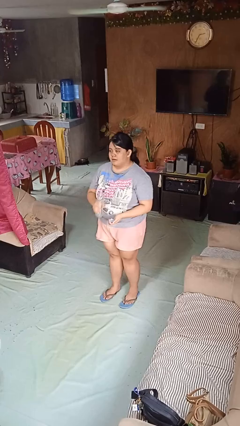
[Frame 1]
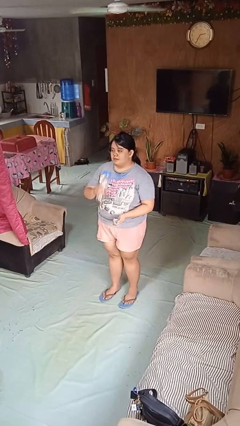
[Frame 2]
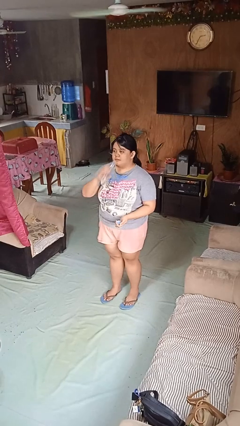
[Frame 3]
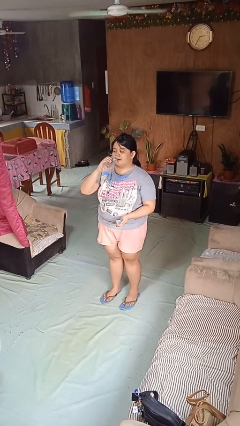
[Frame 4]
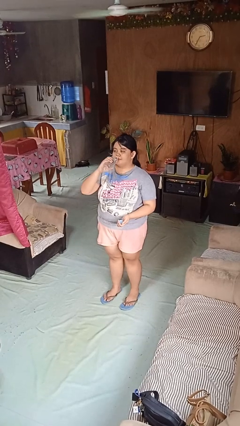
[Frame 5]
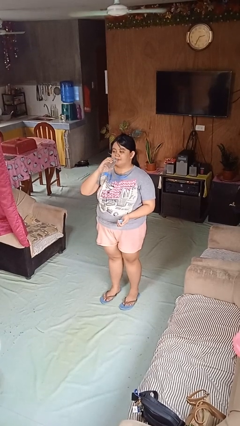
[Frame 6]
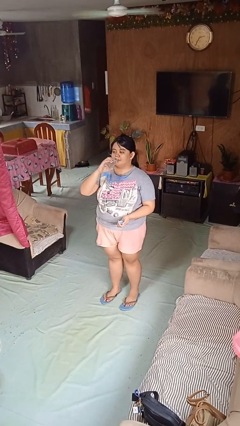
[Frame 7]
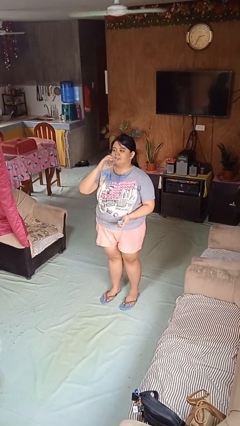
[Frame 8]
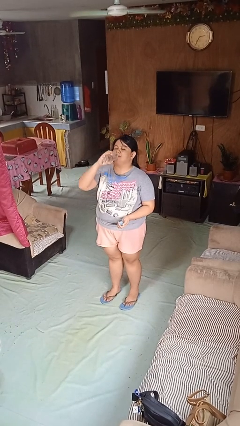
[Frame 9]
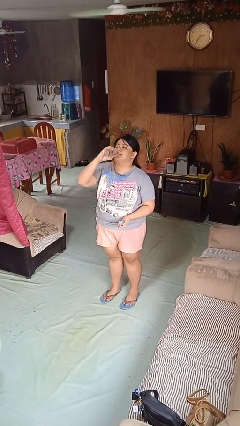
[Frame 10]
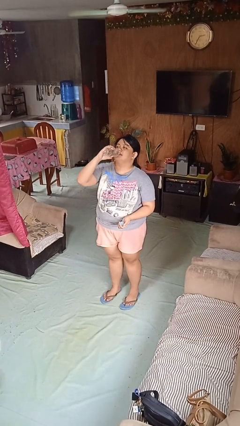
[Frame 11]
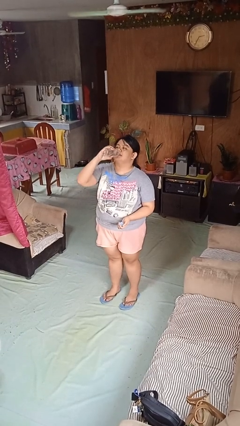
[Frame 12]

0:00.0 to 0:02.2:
person drinks from bottle

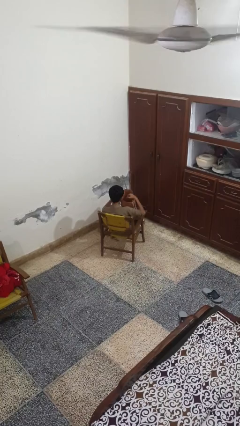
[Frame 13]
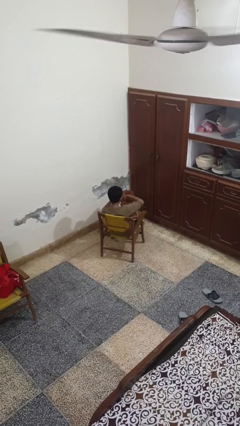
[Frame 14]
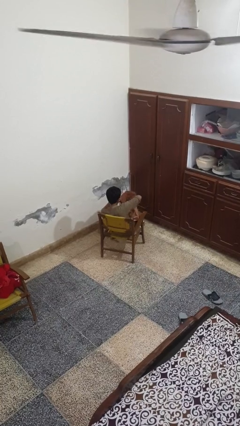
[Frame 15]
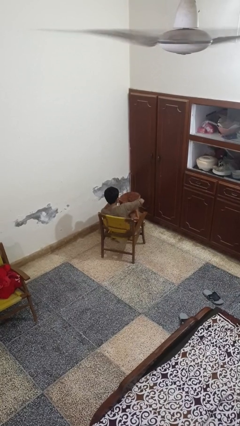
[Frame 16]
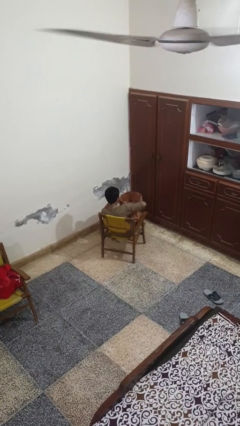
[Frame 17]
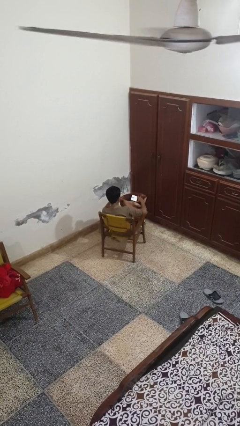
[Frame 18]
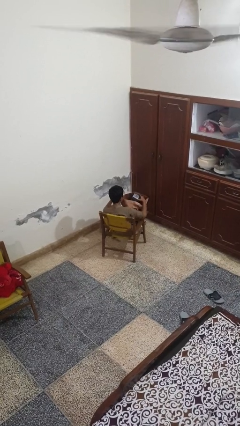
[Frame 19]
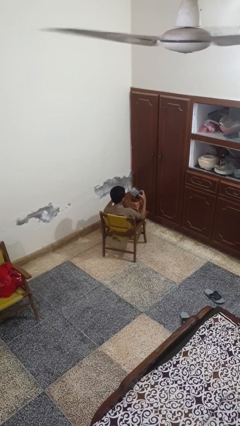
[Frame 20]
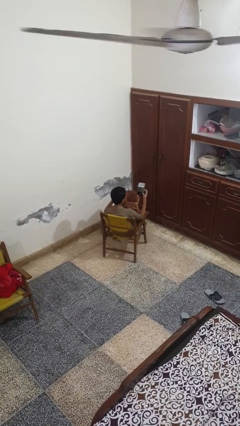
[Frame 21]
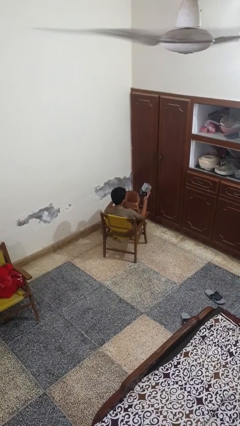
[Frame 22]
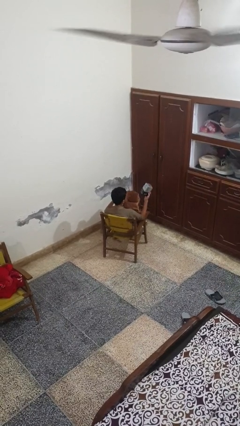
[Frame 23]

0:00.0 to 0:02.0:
person takes object from bag

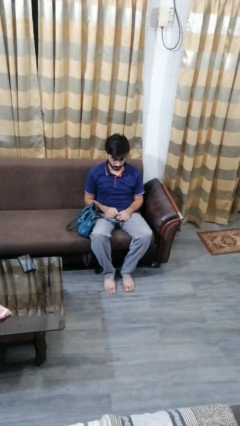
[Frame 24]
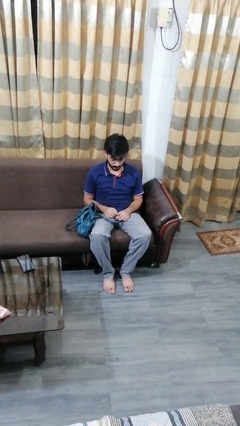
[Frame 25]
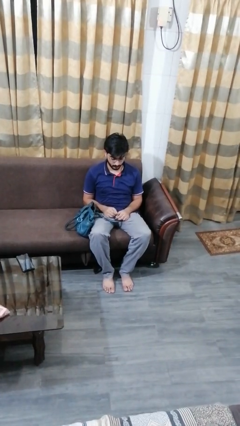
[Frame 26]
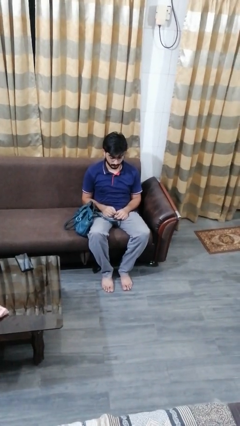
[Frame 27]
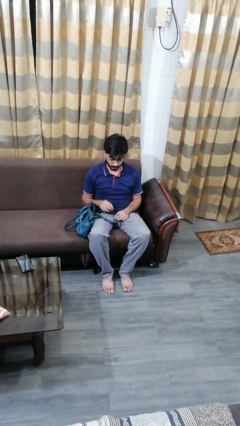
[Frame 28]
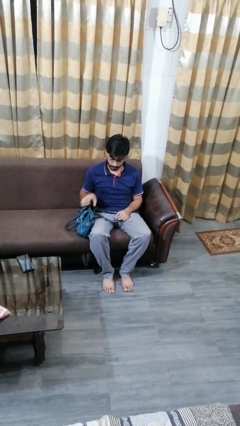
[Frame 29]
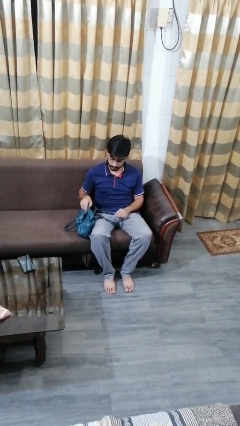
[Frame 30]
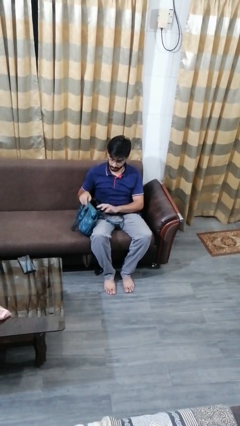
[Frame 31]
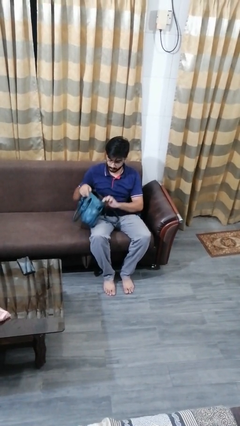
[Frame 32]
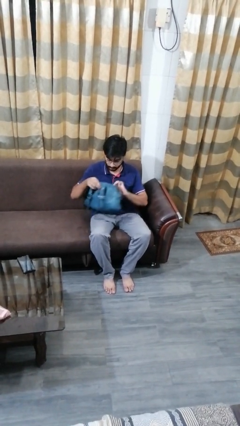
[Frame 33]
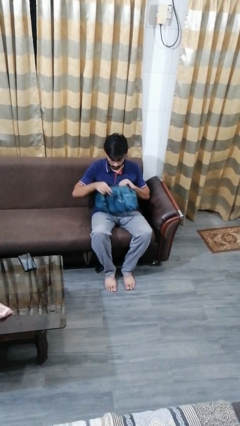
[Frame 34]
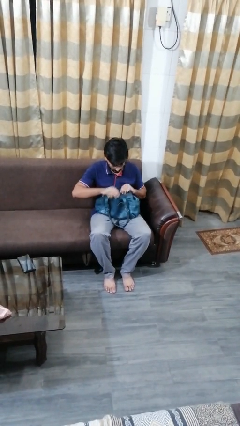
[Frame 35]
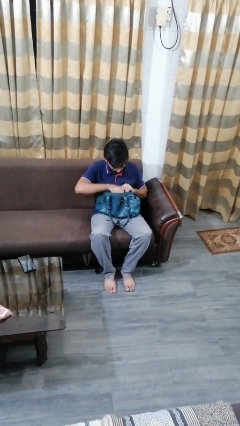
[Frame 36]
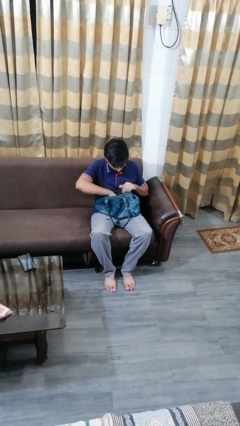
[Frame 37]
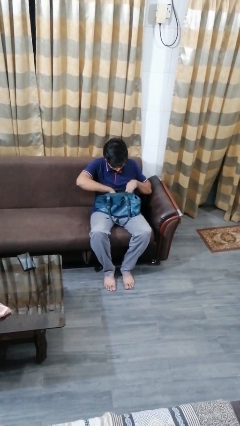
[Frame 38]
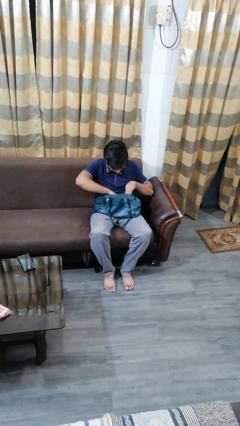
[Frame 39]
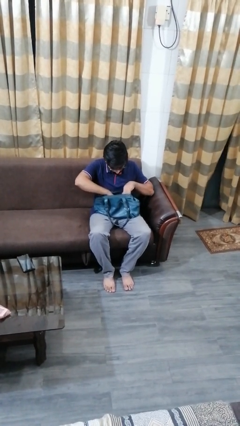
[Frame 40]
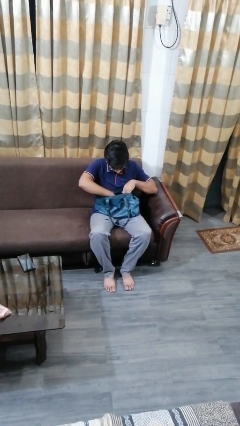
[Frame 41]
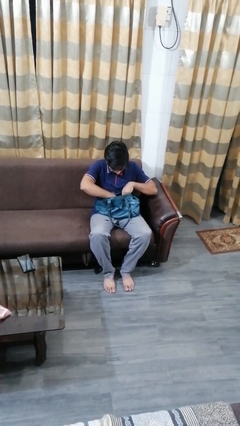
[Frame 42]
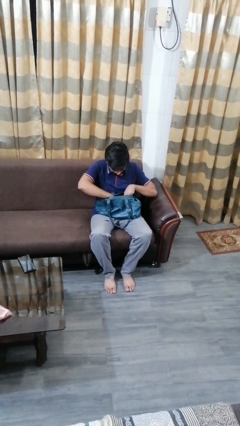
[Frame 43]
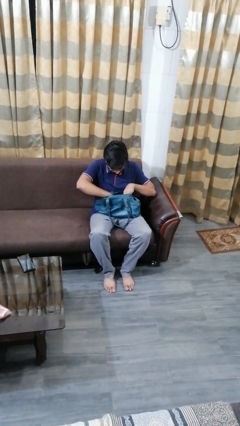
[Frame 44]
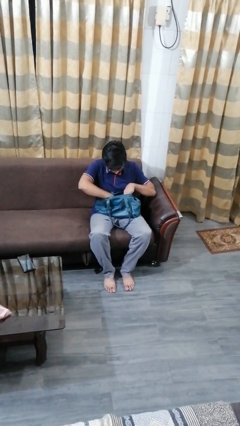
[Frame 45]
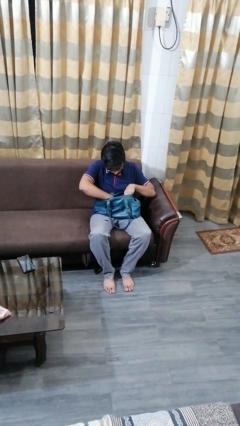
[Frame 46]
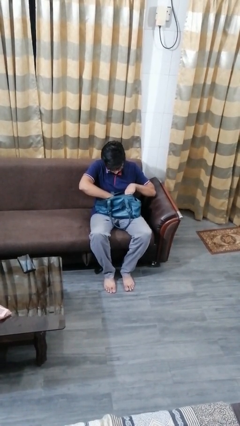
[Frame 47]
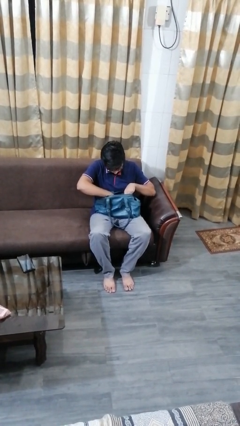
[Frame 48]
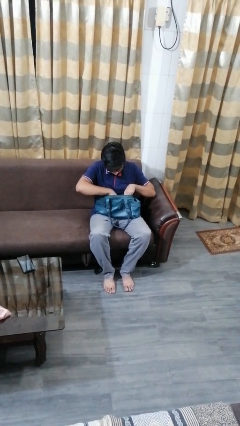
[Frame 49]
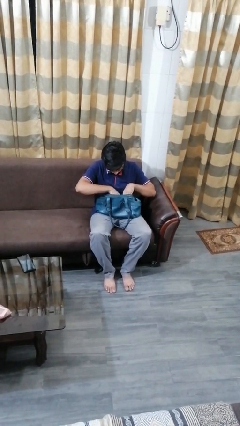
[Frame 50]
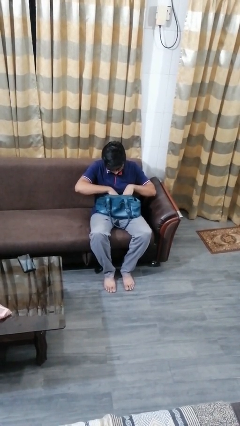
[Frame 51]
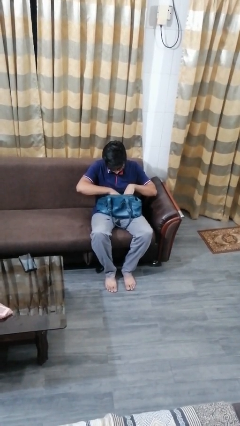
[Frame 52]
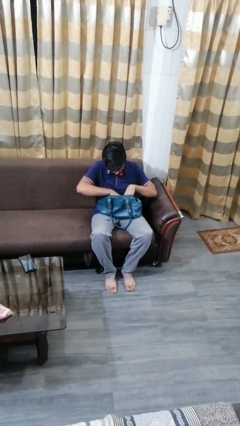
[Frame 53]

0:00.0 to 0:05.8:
person searches in purse

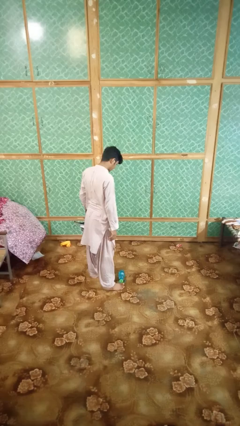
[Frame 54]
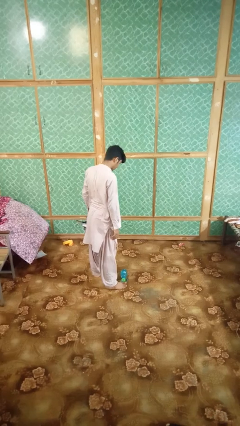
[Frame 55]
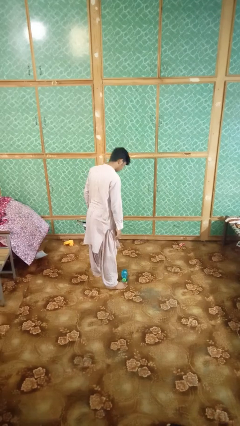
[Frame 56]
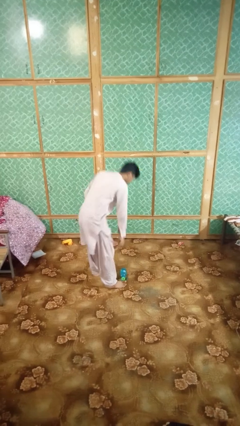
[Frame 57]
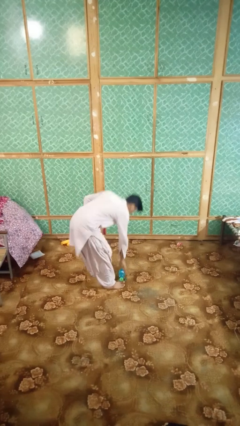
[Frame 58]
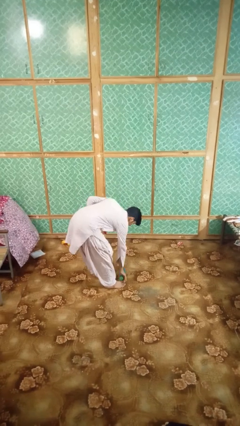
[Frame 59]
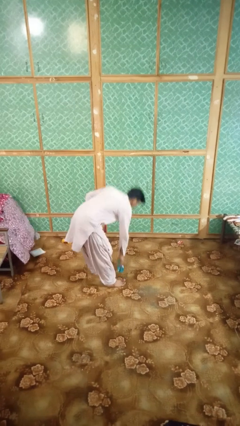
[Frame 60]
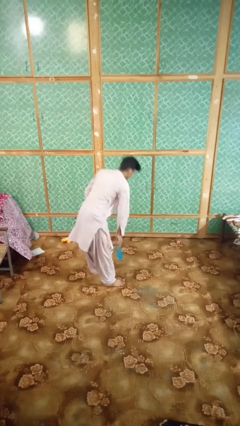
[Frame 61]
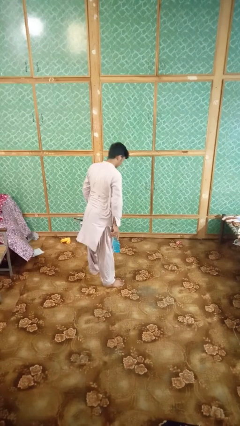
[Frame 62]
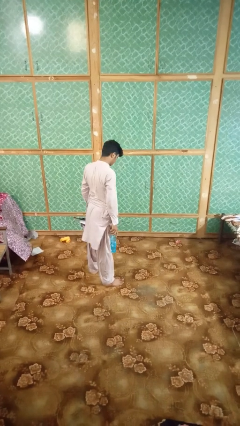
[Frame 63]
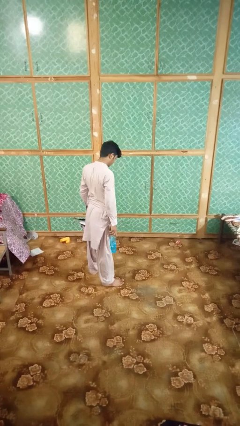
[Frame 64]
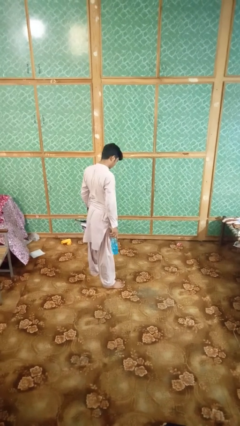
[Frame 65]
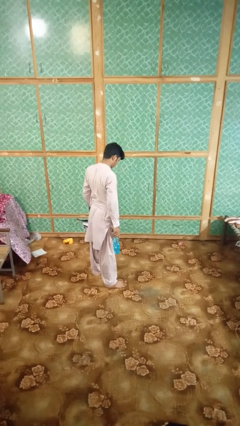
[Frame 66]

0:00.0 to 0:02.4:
person picks up object from floor

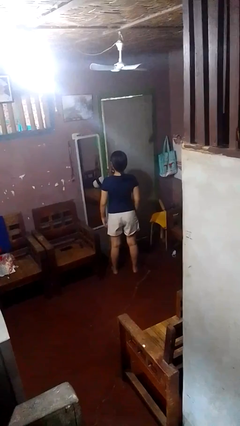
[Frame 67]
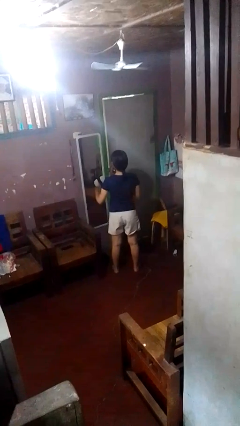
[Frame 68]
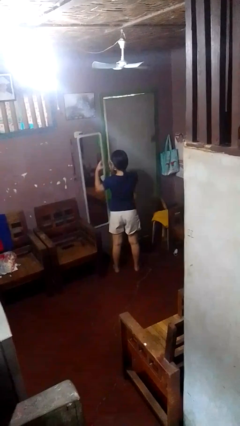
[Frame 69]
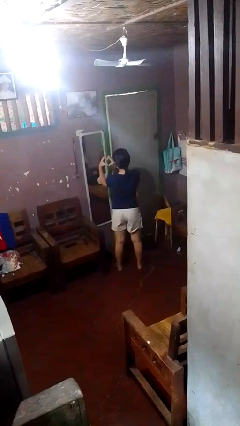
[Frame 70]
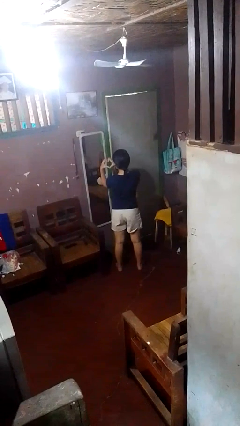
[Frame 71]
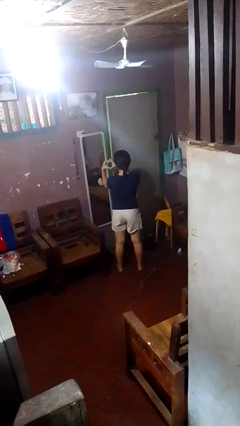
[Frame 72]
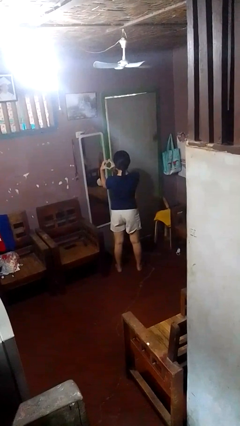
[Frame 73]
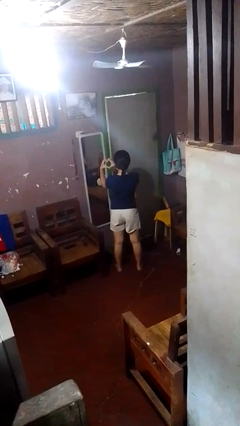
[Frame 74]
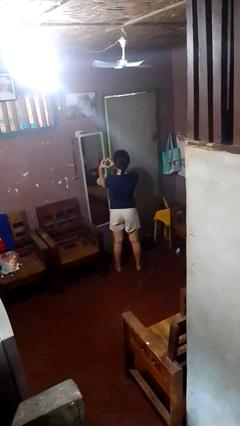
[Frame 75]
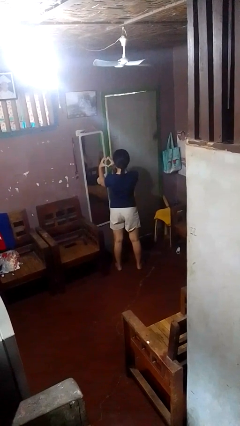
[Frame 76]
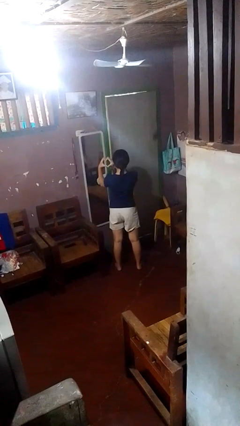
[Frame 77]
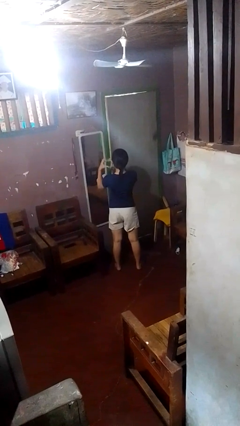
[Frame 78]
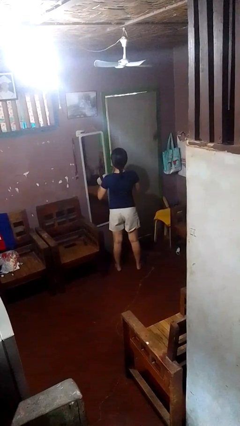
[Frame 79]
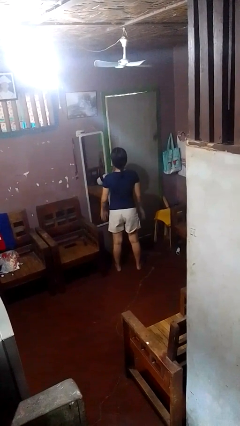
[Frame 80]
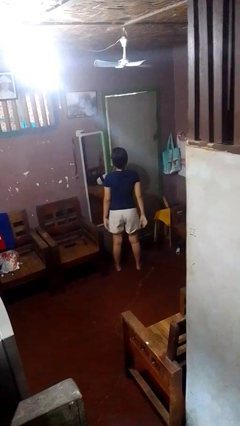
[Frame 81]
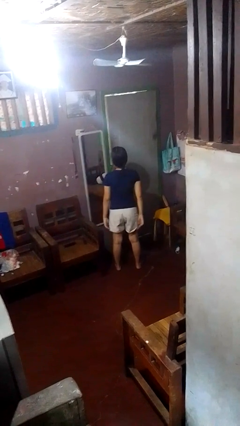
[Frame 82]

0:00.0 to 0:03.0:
person gestures heart

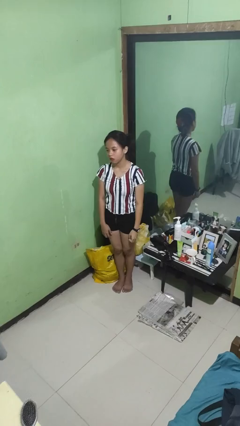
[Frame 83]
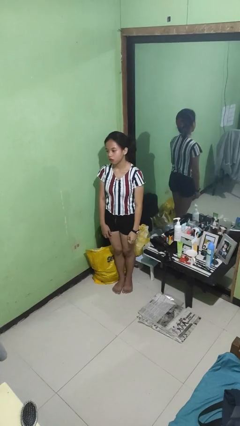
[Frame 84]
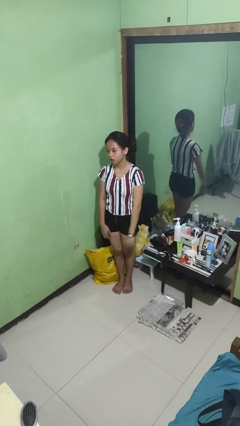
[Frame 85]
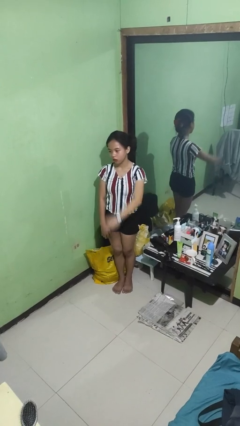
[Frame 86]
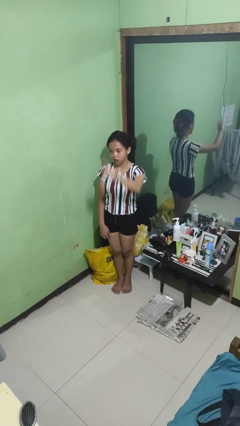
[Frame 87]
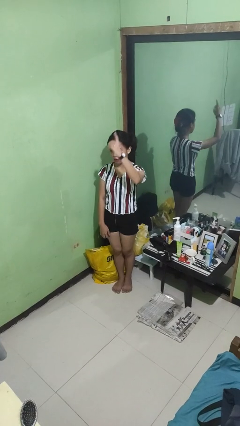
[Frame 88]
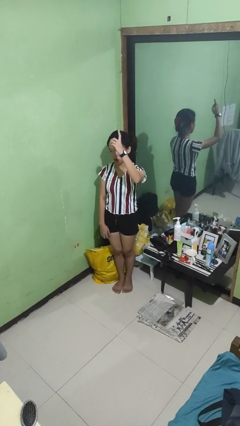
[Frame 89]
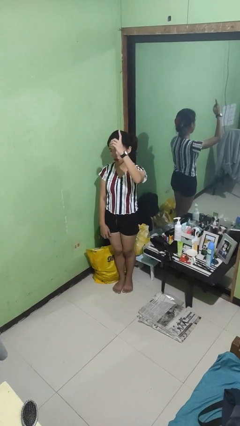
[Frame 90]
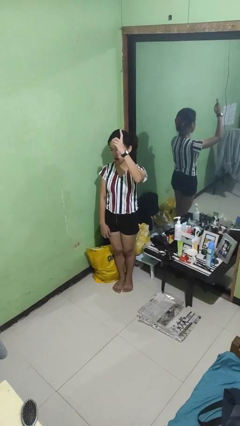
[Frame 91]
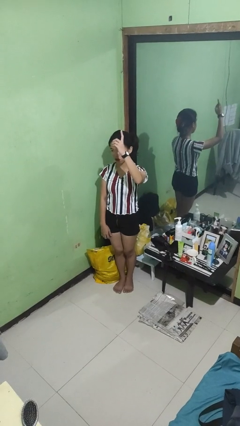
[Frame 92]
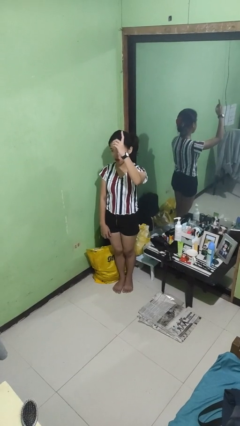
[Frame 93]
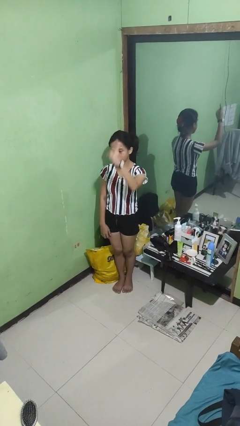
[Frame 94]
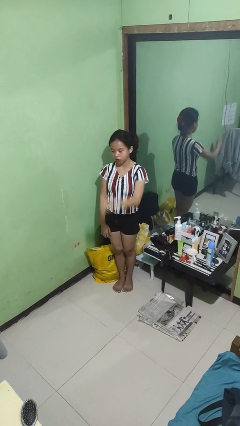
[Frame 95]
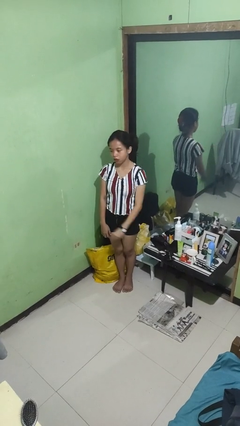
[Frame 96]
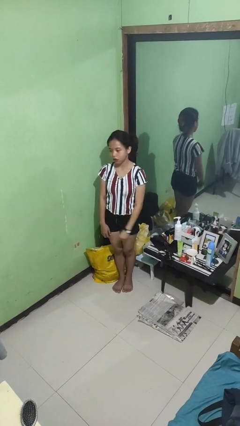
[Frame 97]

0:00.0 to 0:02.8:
person gestures number one
